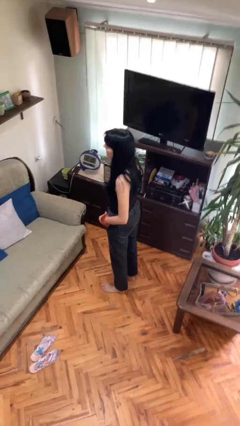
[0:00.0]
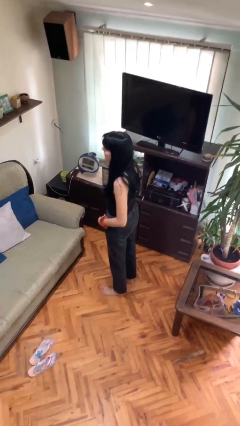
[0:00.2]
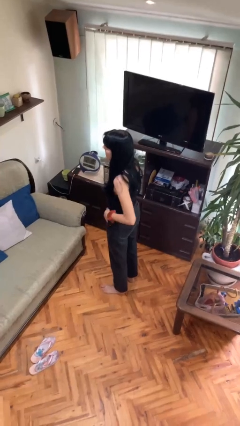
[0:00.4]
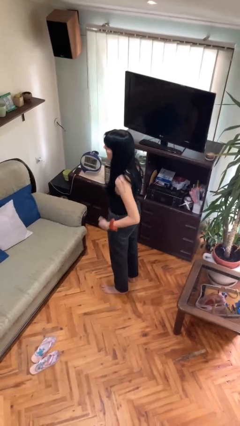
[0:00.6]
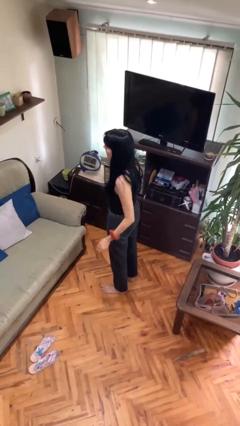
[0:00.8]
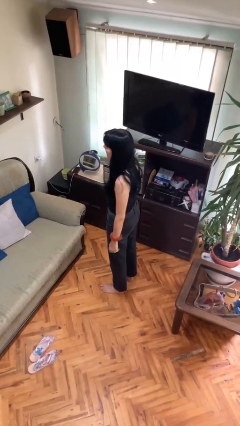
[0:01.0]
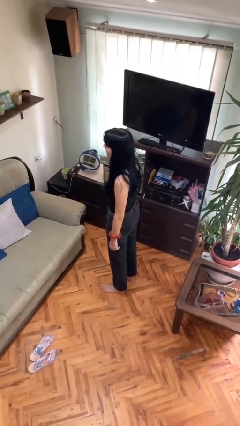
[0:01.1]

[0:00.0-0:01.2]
person puts hands in back pockets

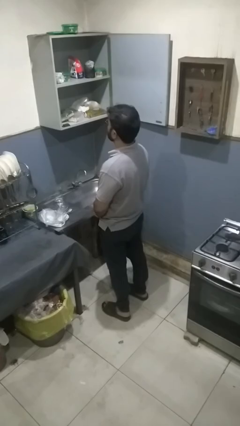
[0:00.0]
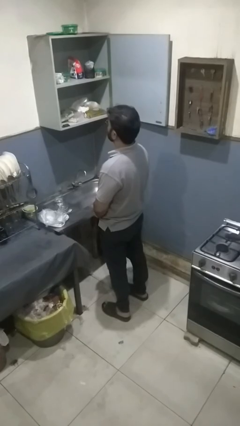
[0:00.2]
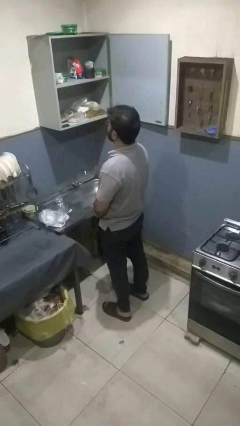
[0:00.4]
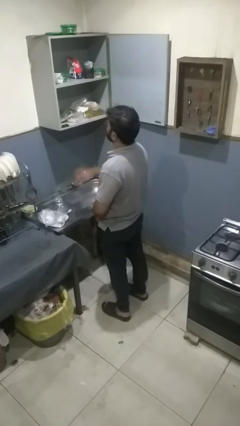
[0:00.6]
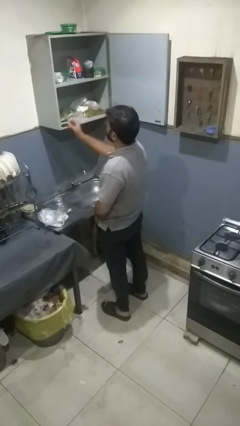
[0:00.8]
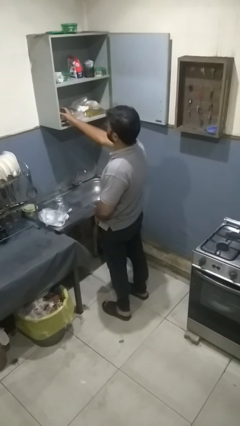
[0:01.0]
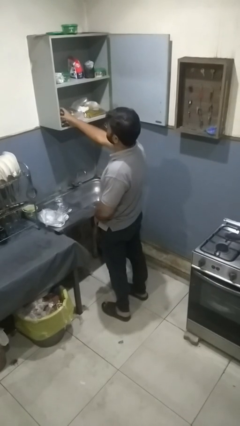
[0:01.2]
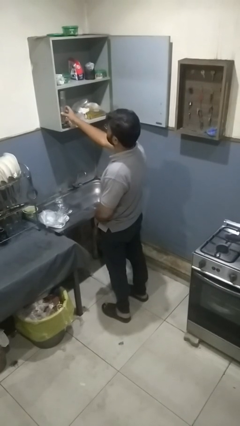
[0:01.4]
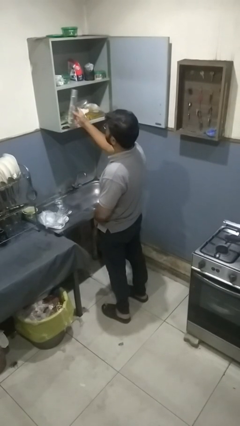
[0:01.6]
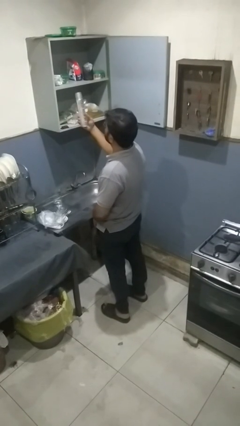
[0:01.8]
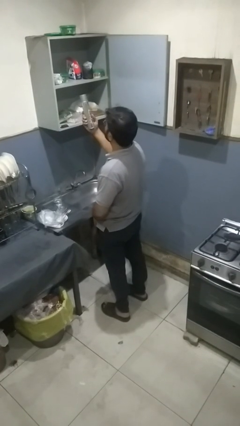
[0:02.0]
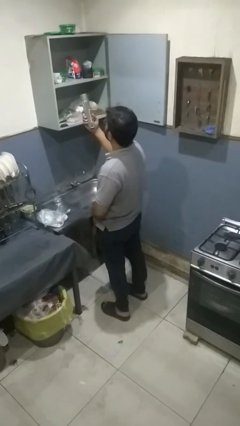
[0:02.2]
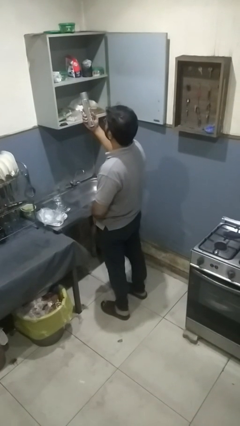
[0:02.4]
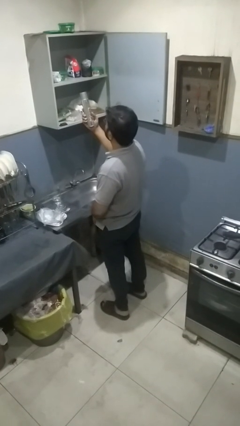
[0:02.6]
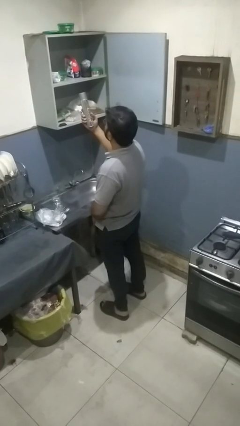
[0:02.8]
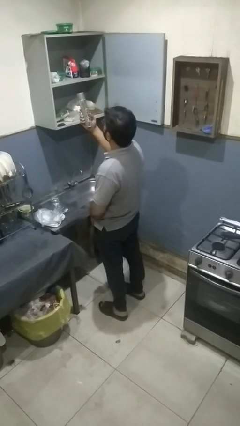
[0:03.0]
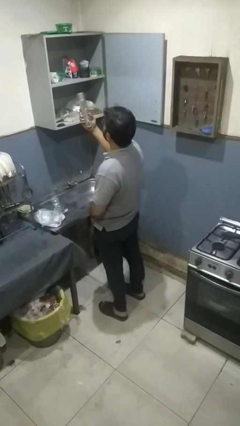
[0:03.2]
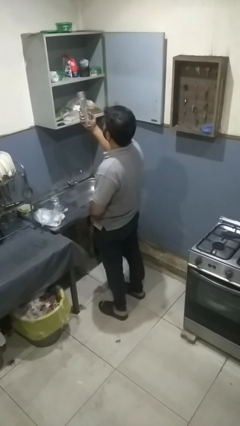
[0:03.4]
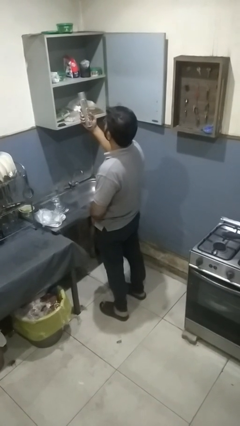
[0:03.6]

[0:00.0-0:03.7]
person picks up object from cabinet

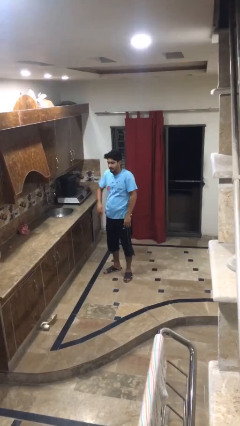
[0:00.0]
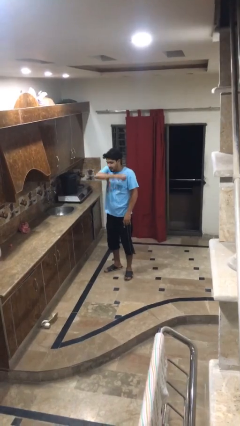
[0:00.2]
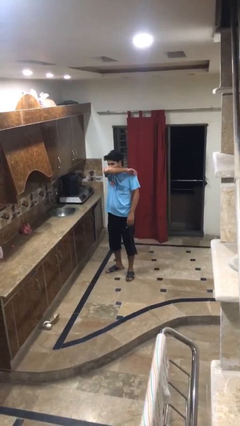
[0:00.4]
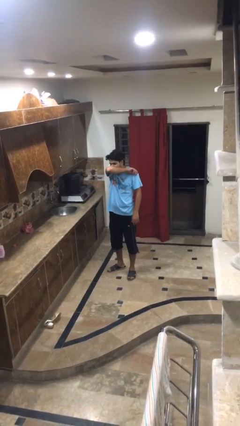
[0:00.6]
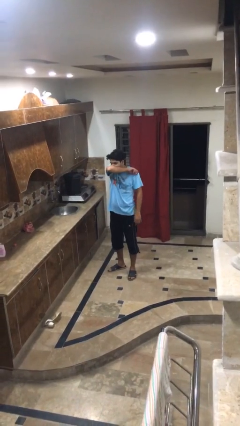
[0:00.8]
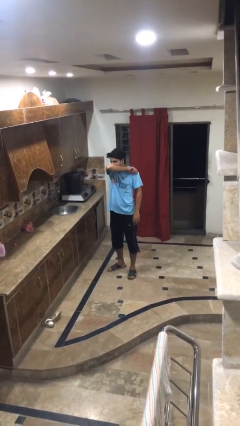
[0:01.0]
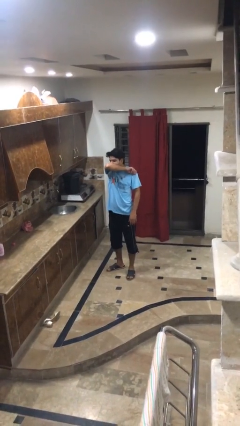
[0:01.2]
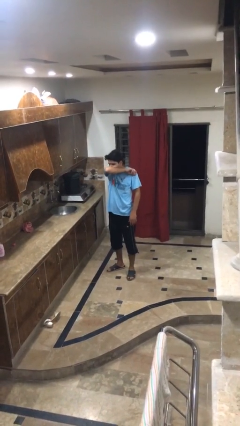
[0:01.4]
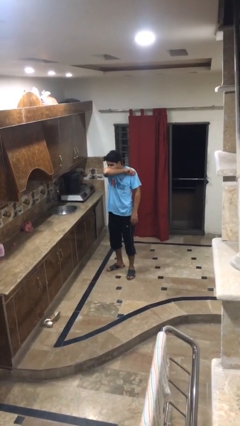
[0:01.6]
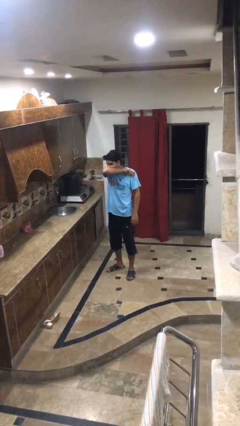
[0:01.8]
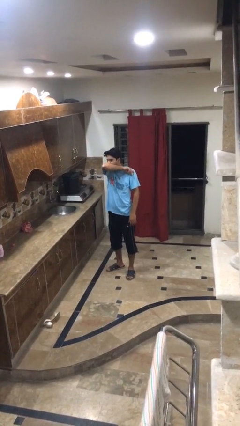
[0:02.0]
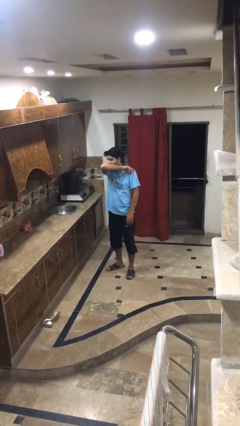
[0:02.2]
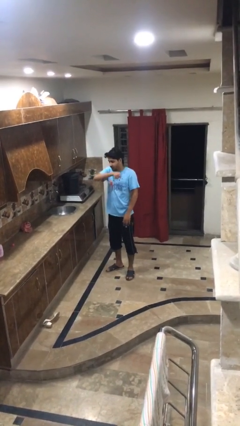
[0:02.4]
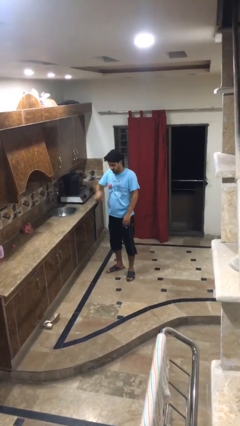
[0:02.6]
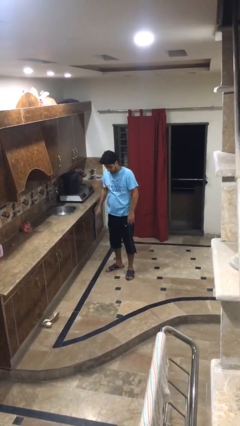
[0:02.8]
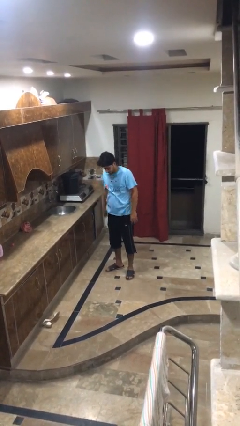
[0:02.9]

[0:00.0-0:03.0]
person sneezes into arm

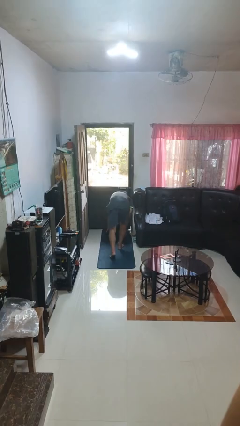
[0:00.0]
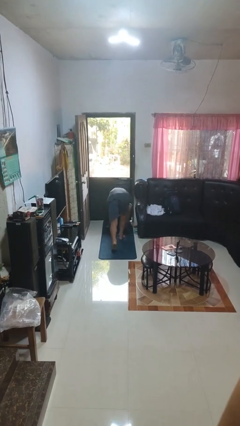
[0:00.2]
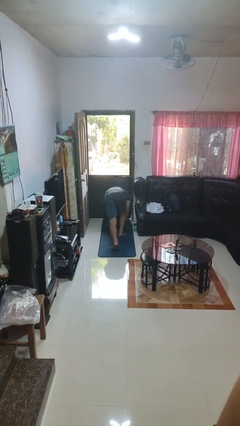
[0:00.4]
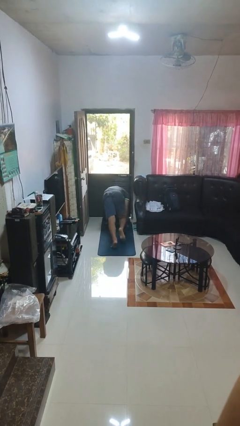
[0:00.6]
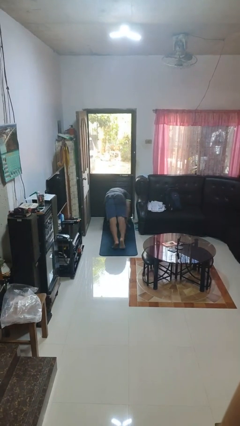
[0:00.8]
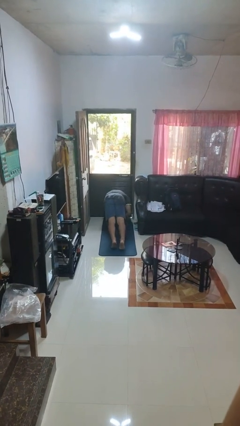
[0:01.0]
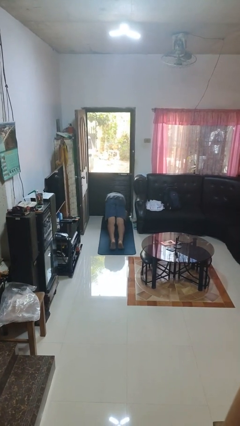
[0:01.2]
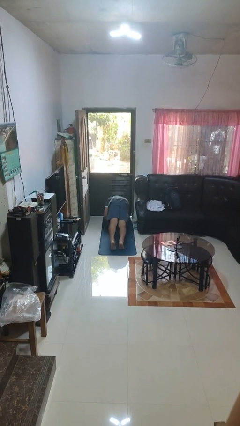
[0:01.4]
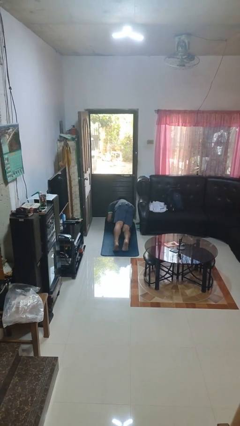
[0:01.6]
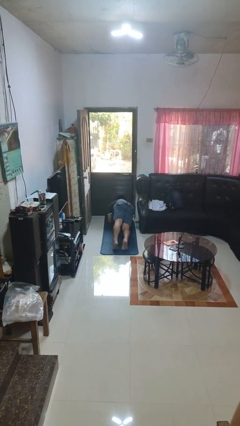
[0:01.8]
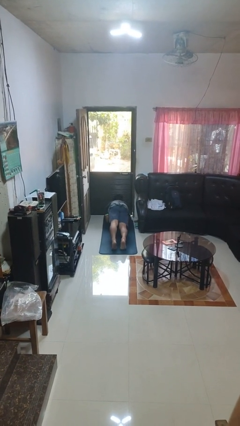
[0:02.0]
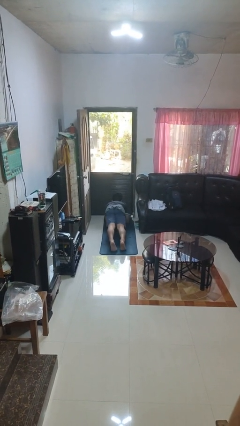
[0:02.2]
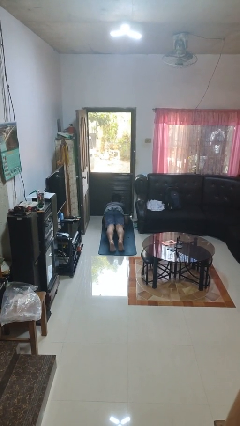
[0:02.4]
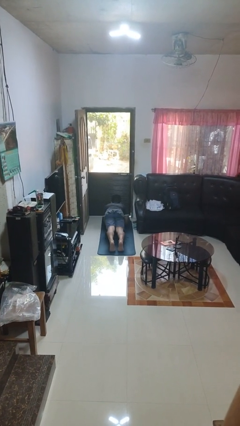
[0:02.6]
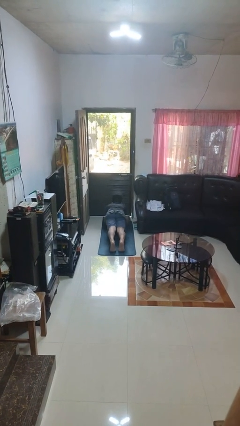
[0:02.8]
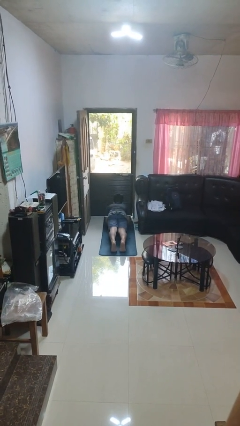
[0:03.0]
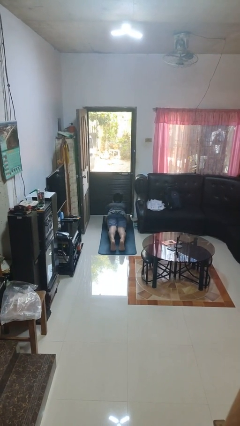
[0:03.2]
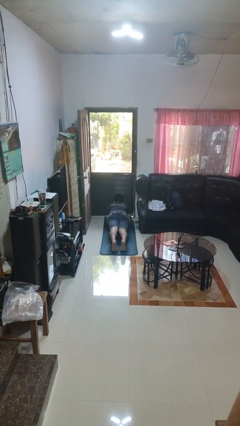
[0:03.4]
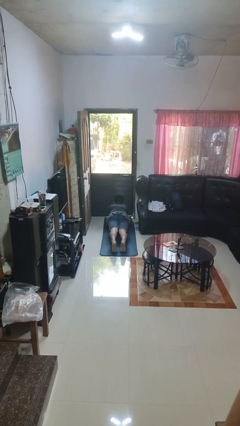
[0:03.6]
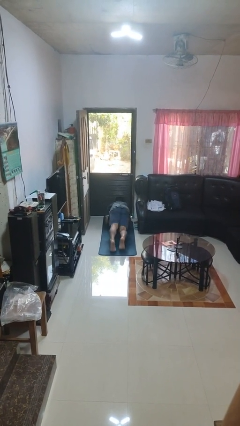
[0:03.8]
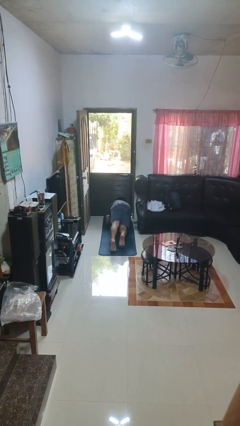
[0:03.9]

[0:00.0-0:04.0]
person exercises with plank

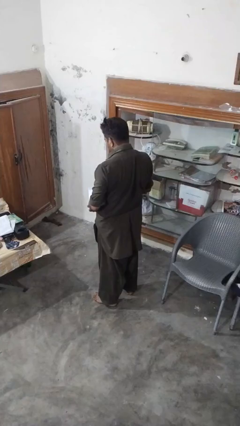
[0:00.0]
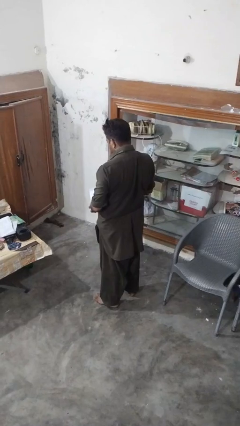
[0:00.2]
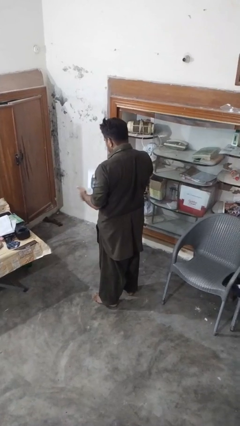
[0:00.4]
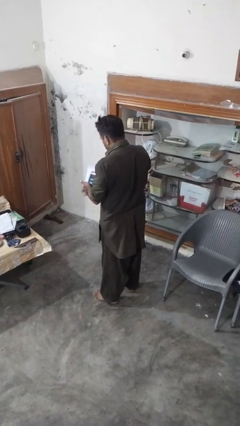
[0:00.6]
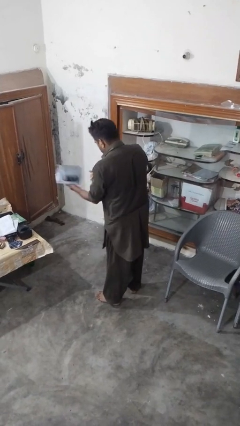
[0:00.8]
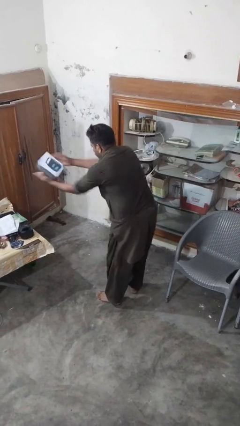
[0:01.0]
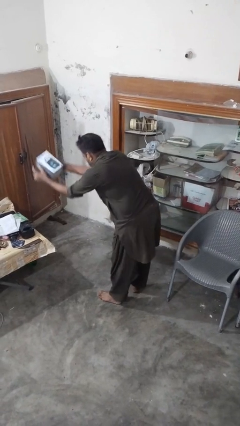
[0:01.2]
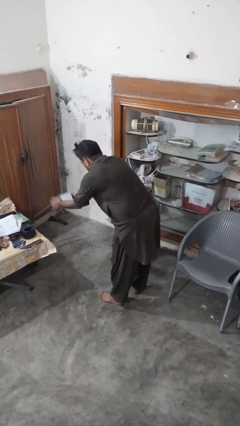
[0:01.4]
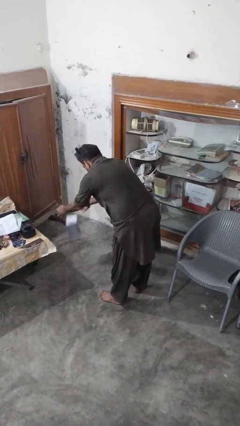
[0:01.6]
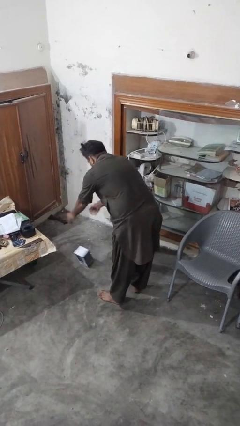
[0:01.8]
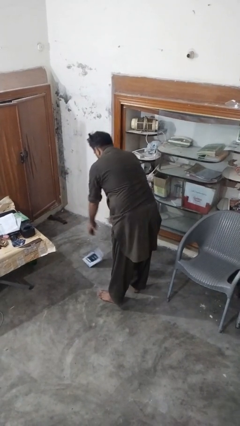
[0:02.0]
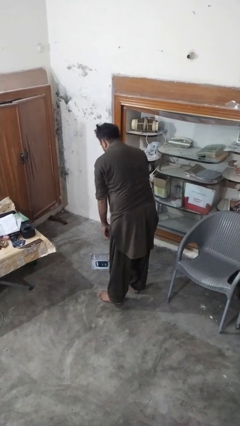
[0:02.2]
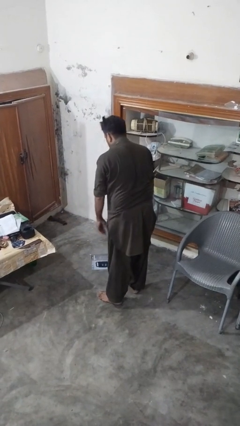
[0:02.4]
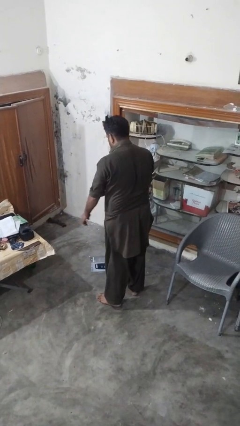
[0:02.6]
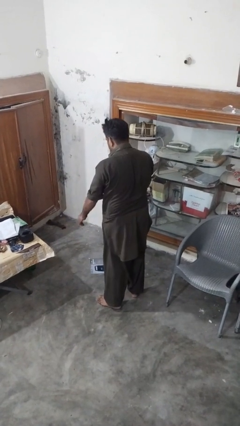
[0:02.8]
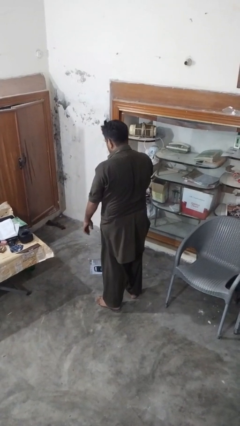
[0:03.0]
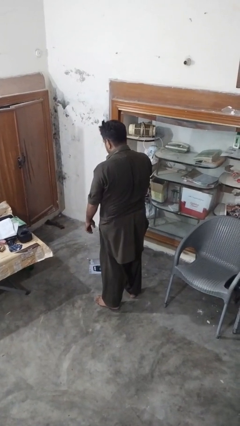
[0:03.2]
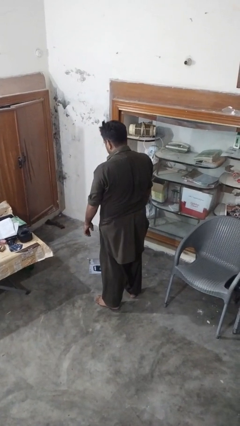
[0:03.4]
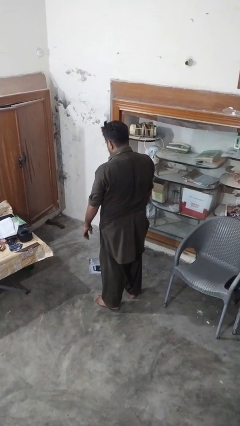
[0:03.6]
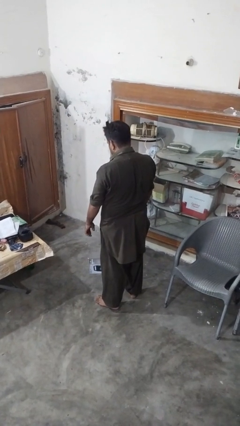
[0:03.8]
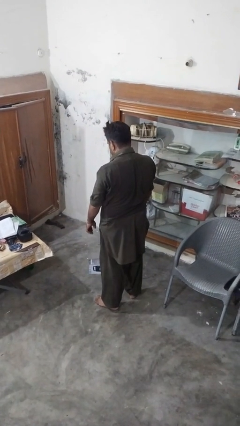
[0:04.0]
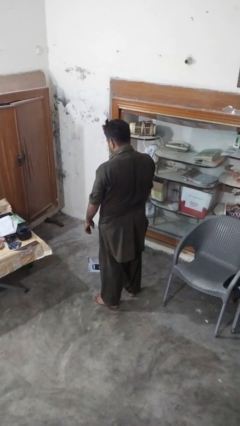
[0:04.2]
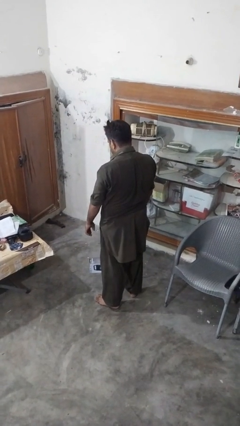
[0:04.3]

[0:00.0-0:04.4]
person drops object

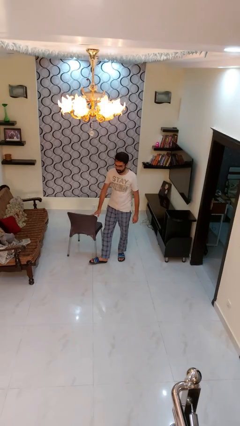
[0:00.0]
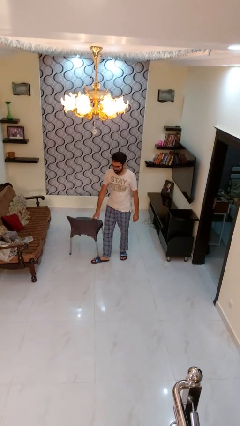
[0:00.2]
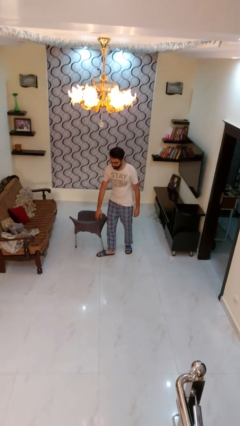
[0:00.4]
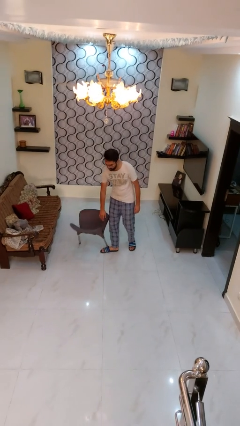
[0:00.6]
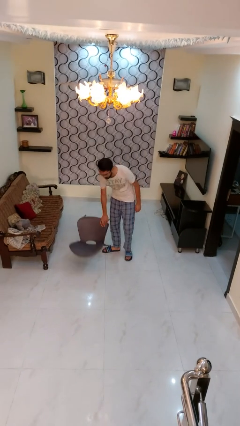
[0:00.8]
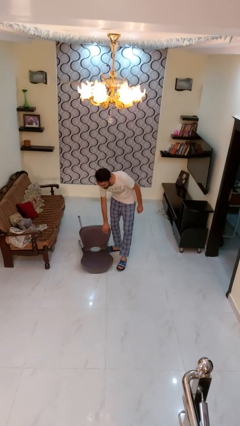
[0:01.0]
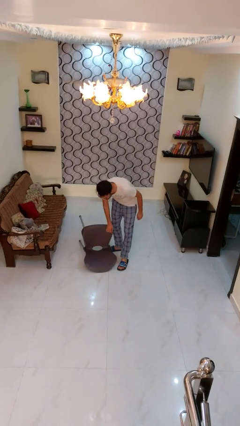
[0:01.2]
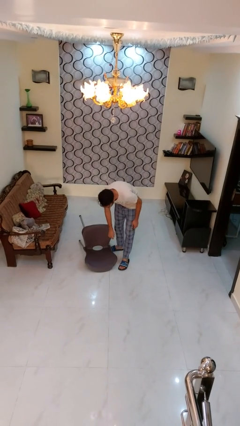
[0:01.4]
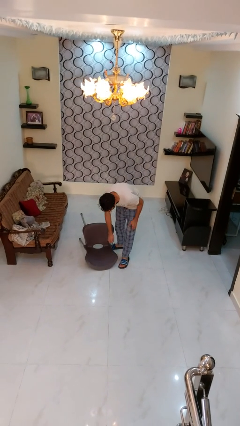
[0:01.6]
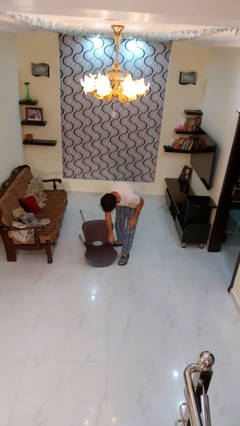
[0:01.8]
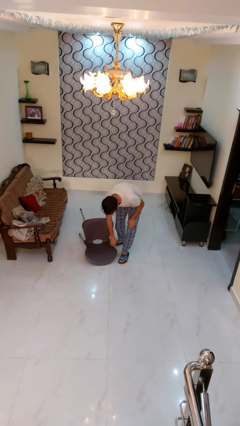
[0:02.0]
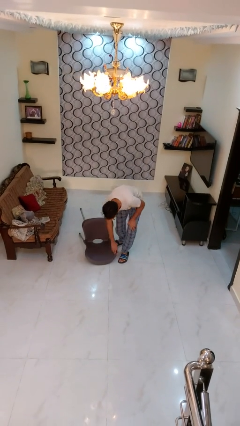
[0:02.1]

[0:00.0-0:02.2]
person knocks over furniture
